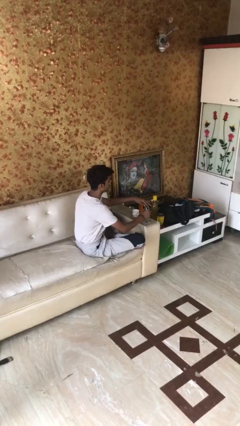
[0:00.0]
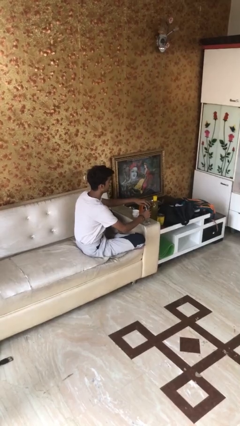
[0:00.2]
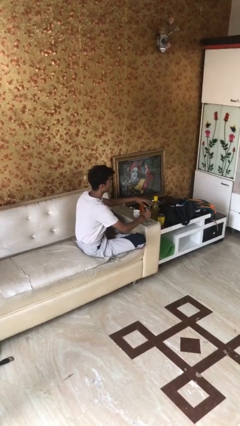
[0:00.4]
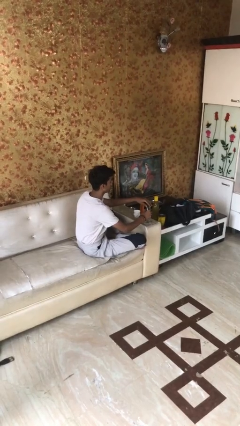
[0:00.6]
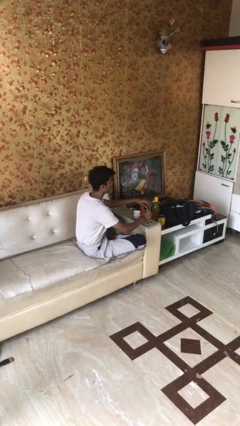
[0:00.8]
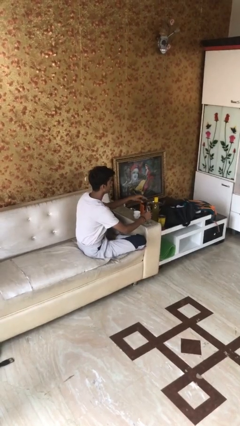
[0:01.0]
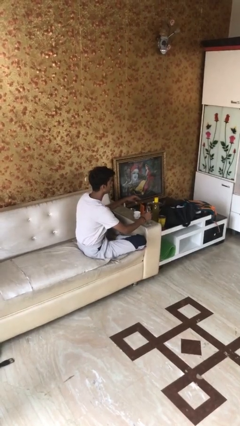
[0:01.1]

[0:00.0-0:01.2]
person unscrews lid from bottle

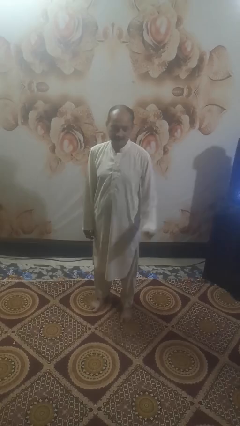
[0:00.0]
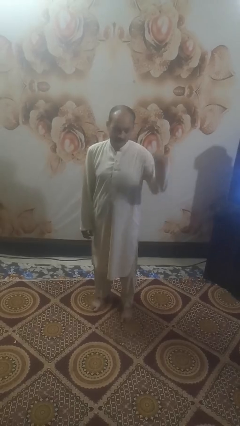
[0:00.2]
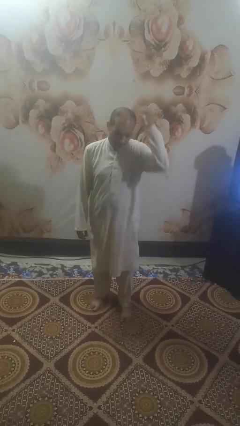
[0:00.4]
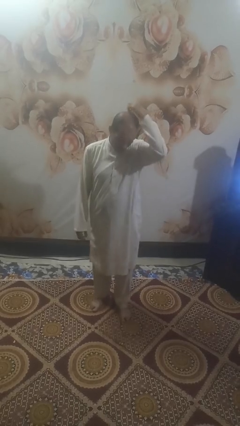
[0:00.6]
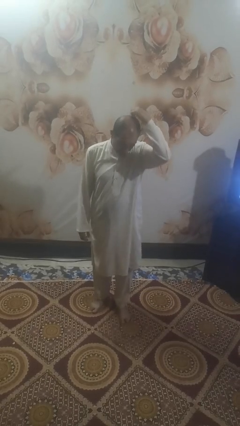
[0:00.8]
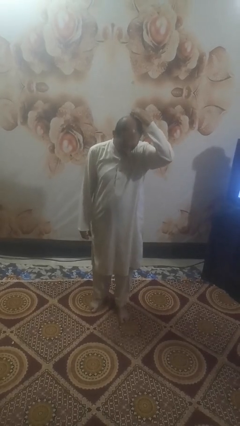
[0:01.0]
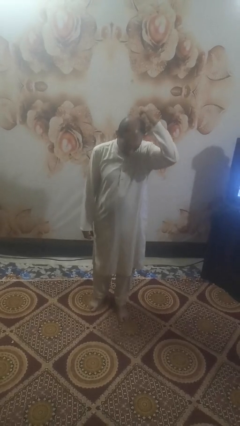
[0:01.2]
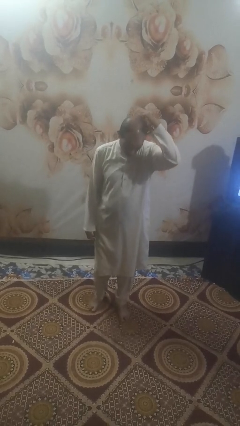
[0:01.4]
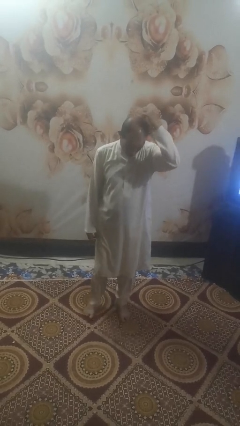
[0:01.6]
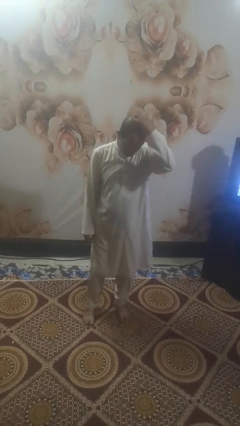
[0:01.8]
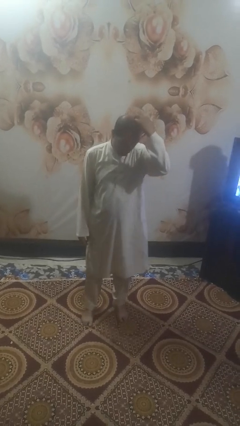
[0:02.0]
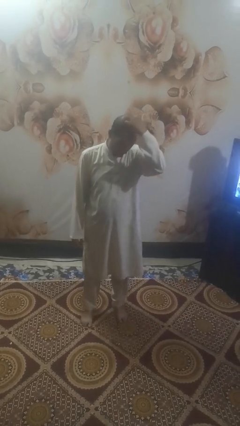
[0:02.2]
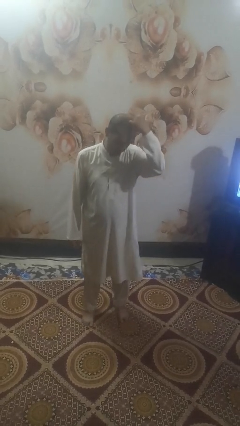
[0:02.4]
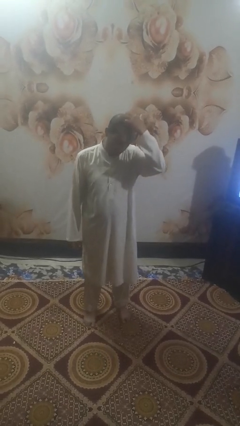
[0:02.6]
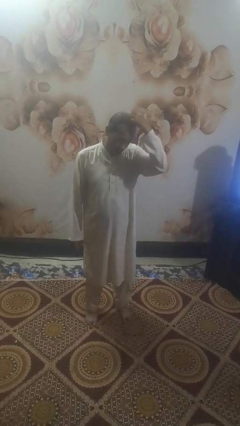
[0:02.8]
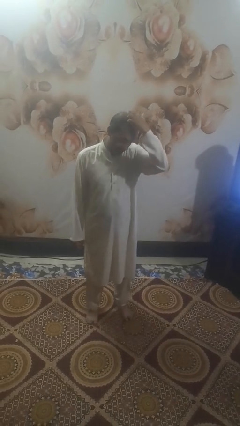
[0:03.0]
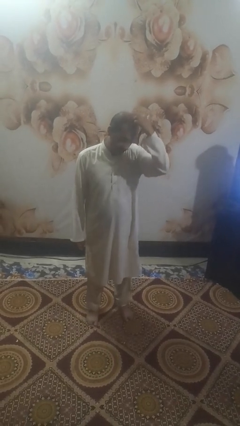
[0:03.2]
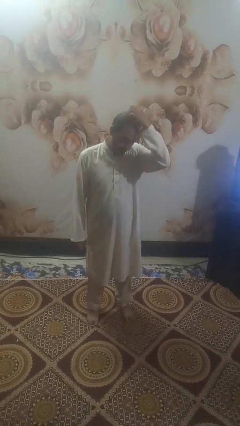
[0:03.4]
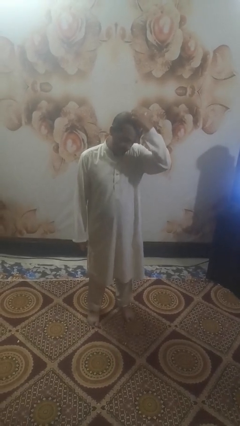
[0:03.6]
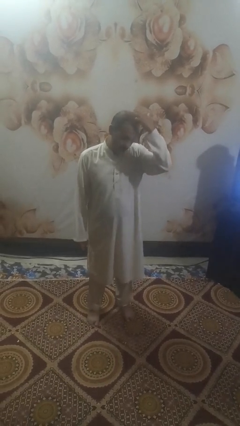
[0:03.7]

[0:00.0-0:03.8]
person scratches face

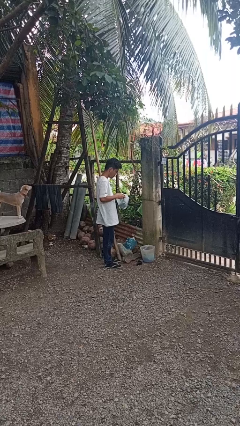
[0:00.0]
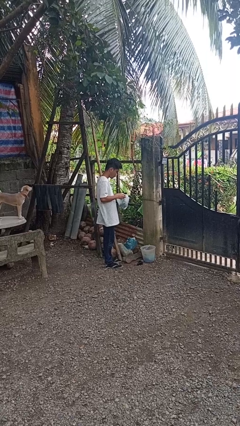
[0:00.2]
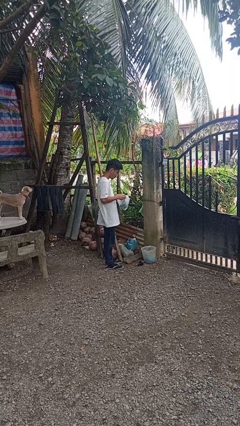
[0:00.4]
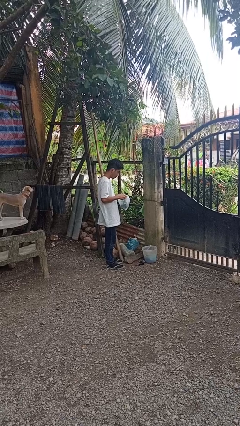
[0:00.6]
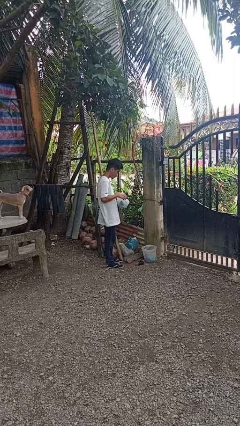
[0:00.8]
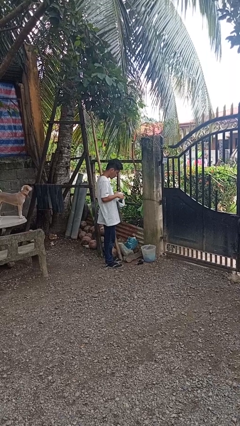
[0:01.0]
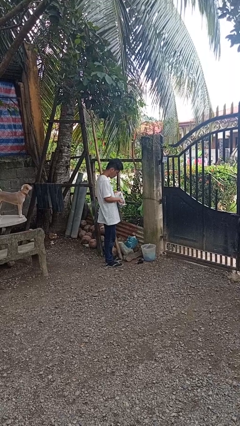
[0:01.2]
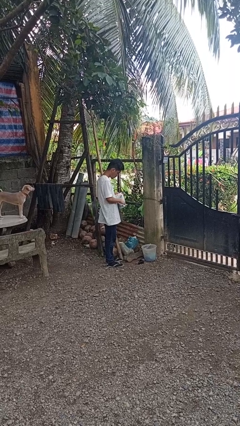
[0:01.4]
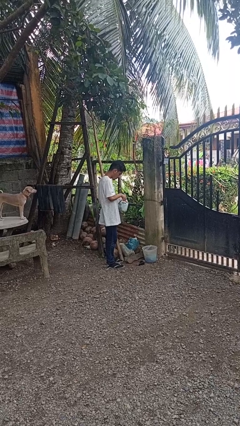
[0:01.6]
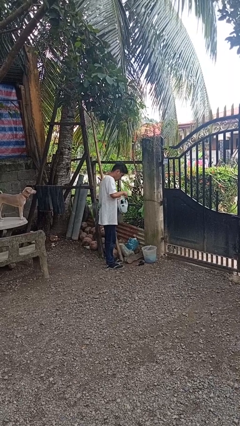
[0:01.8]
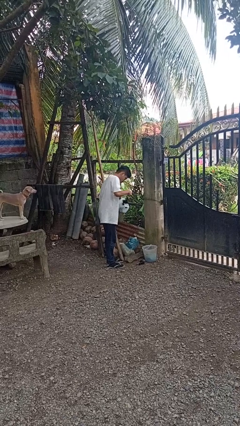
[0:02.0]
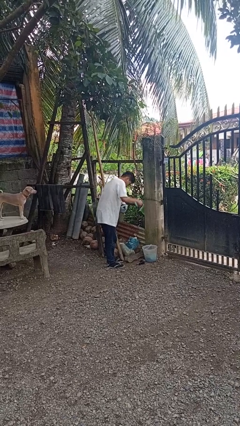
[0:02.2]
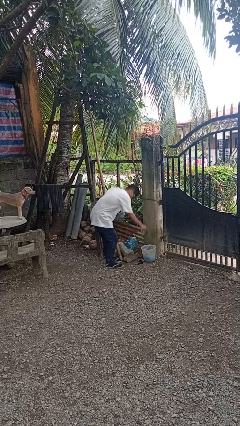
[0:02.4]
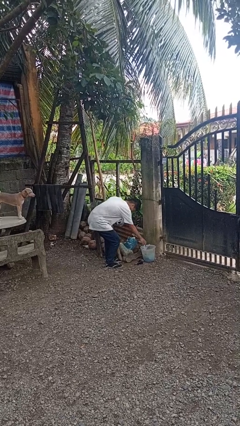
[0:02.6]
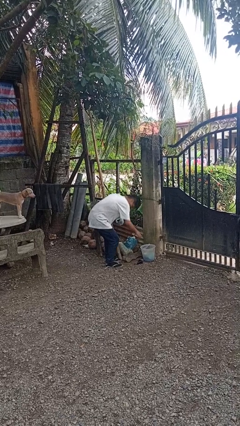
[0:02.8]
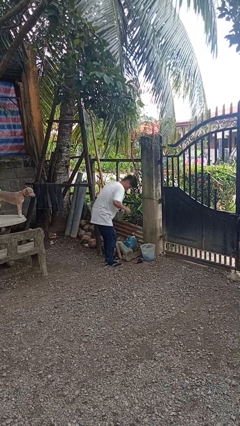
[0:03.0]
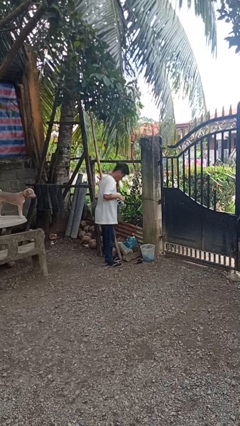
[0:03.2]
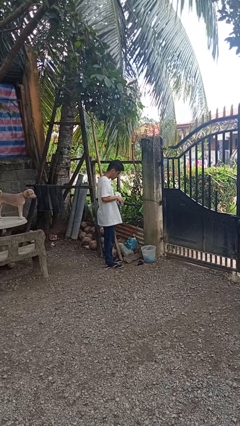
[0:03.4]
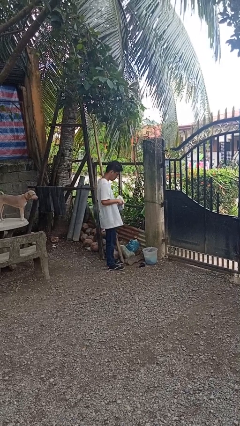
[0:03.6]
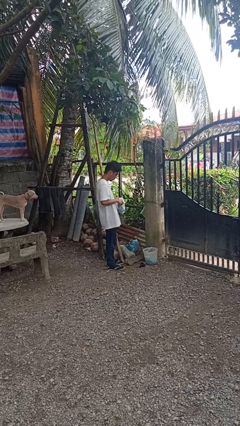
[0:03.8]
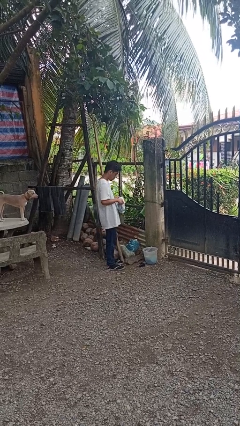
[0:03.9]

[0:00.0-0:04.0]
person discards trash

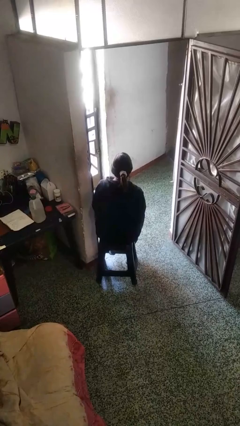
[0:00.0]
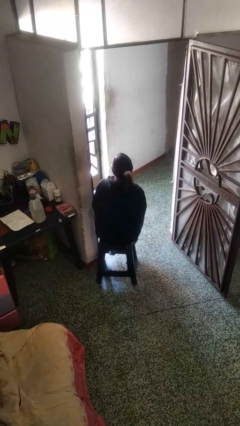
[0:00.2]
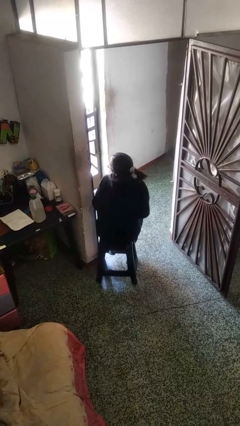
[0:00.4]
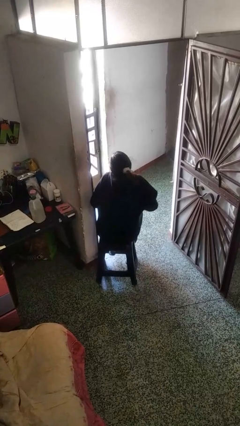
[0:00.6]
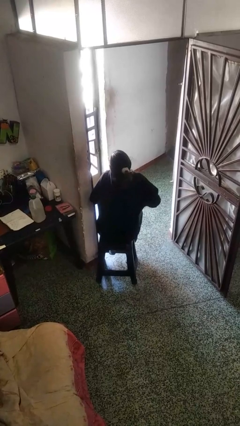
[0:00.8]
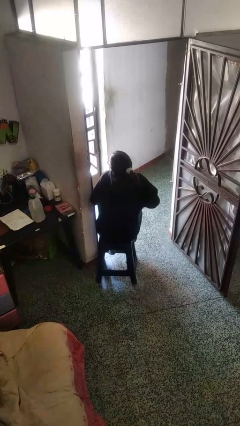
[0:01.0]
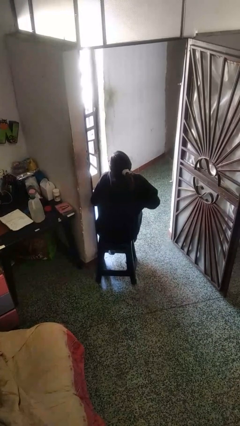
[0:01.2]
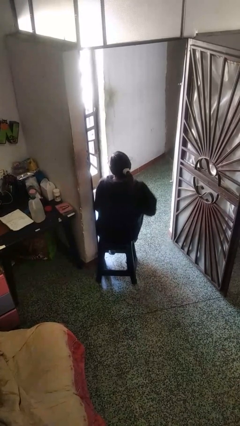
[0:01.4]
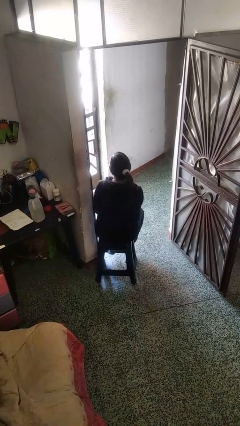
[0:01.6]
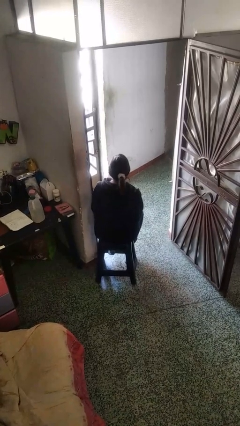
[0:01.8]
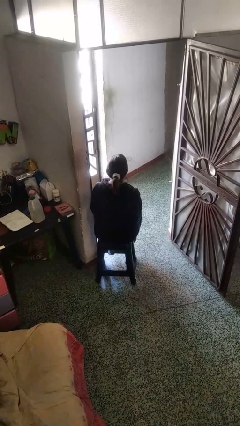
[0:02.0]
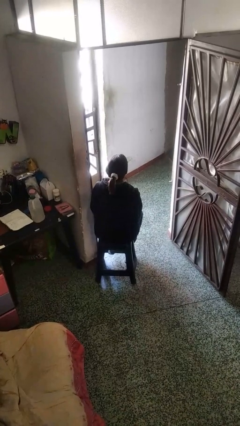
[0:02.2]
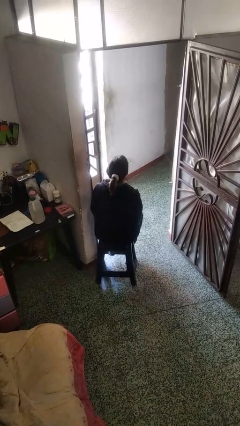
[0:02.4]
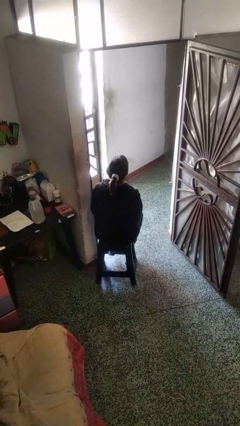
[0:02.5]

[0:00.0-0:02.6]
person shrugs

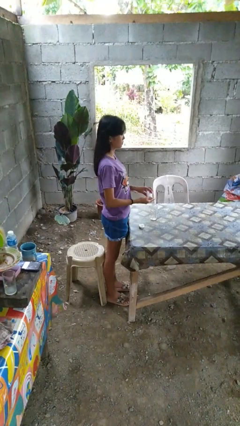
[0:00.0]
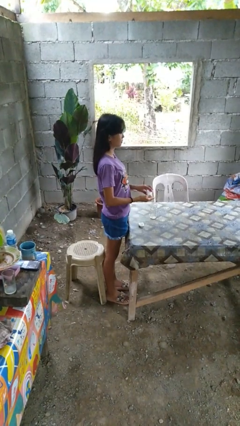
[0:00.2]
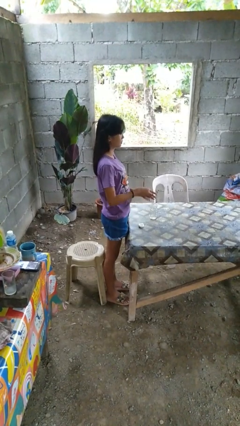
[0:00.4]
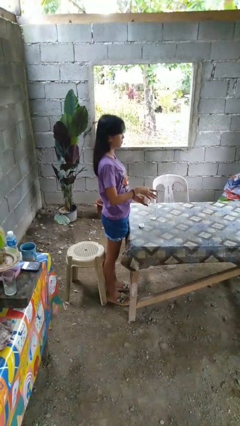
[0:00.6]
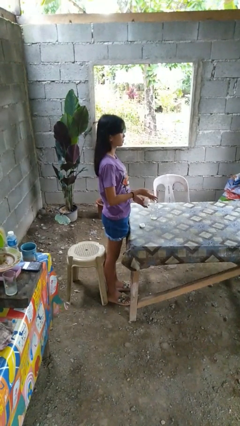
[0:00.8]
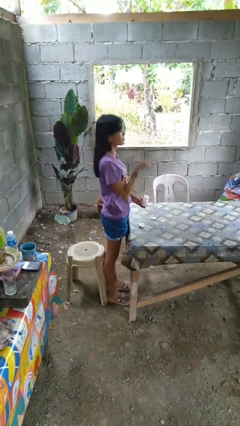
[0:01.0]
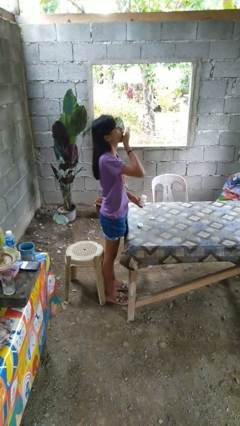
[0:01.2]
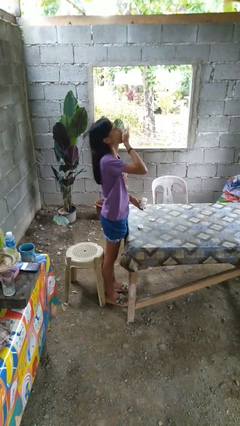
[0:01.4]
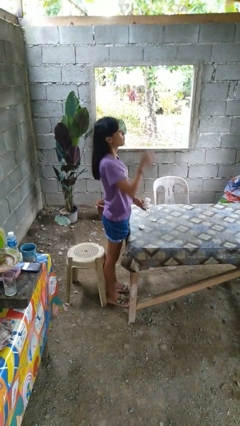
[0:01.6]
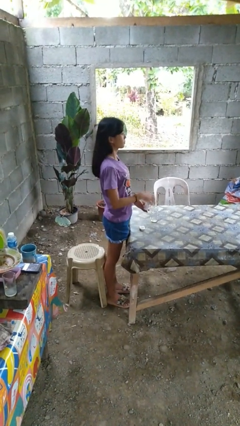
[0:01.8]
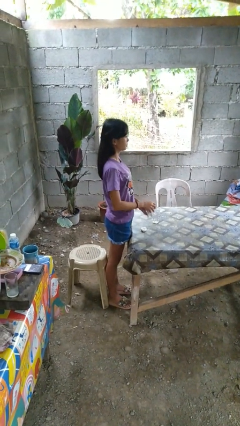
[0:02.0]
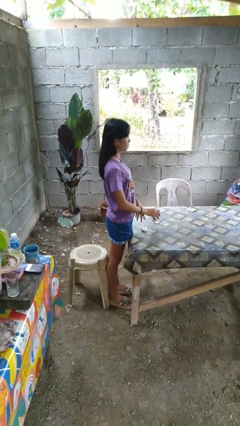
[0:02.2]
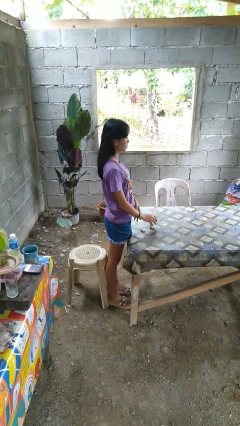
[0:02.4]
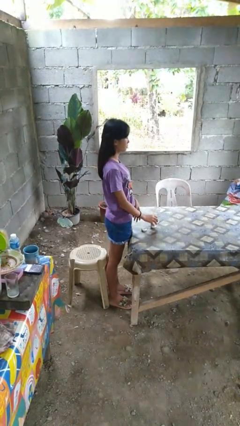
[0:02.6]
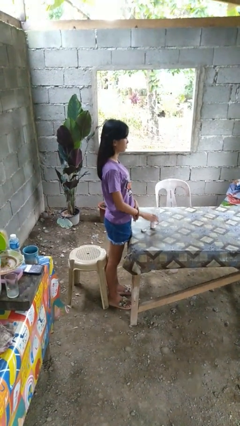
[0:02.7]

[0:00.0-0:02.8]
person takes medicine pills

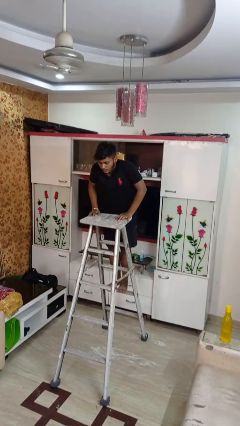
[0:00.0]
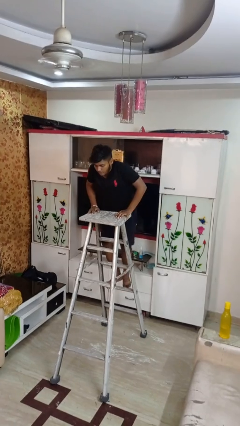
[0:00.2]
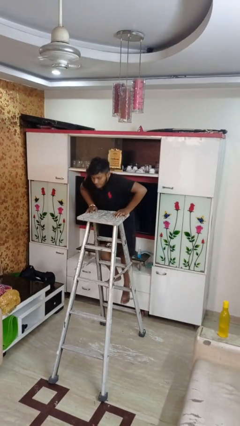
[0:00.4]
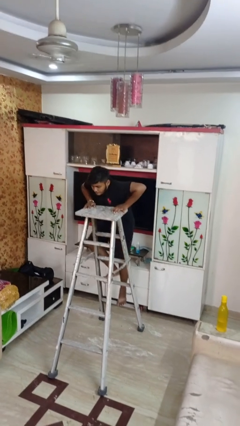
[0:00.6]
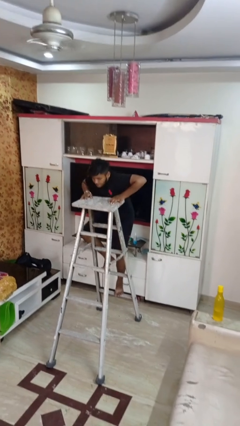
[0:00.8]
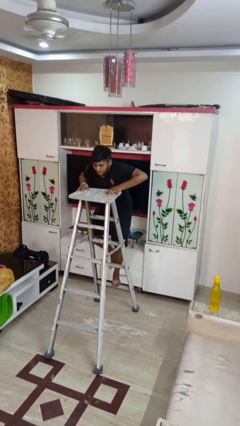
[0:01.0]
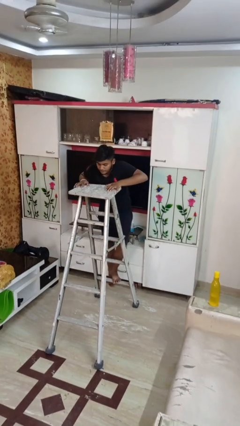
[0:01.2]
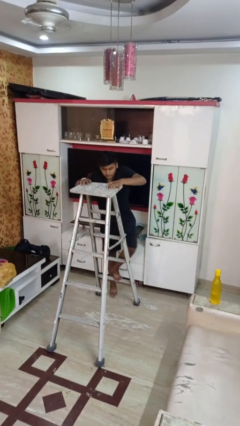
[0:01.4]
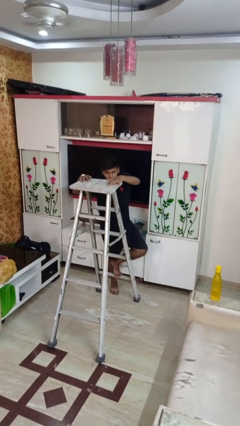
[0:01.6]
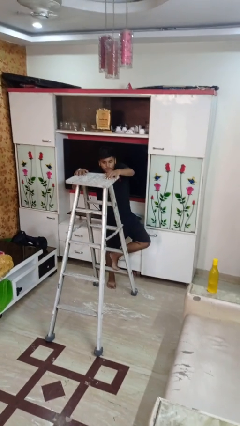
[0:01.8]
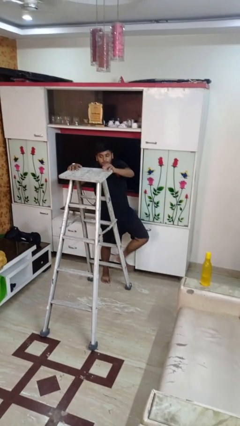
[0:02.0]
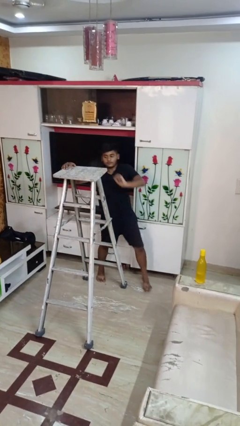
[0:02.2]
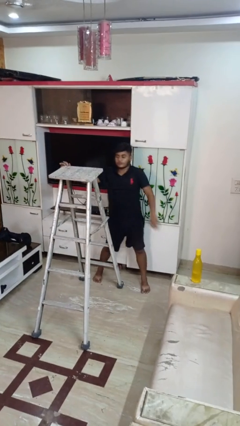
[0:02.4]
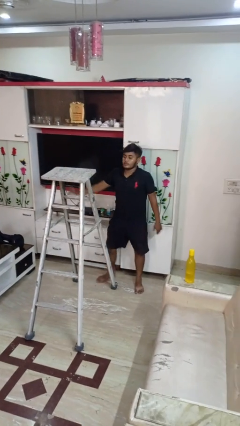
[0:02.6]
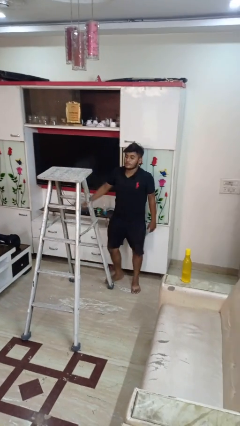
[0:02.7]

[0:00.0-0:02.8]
person climbs down ladder
